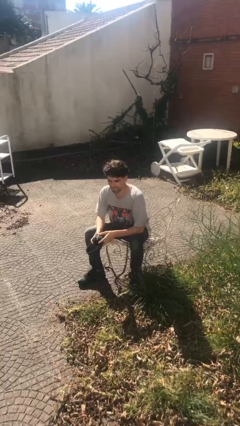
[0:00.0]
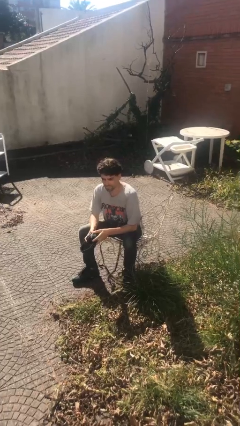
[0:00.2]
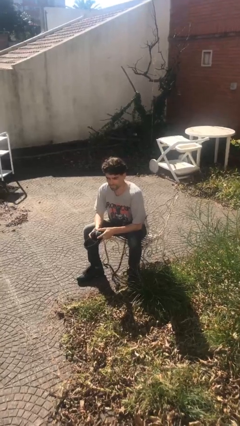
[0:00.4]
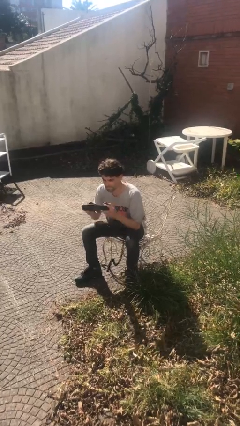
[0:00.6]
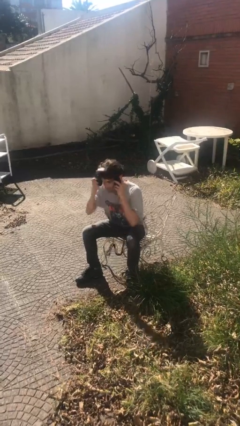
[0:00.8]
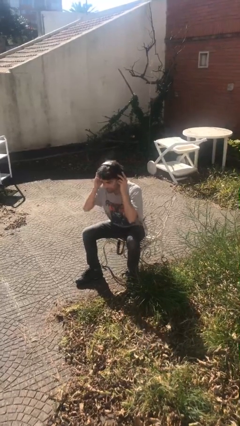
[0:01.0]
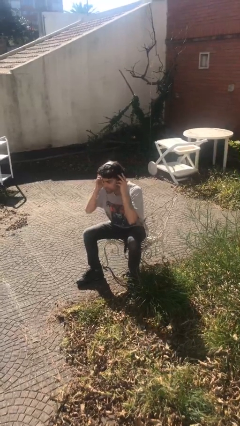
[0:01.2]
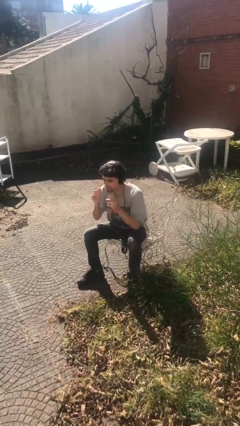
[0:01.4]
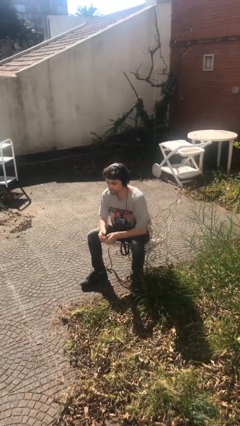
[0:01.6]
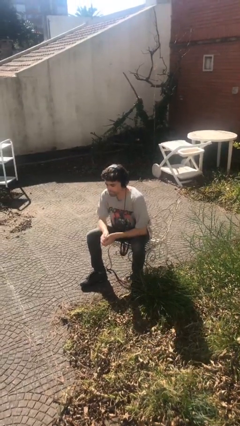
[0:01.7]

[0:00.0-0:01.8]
person puts on headphones

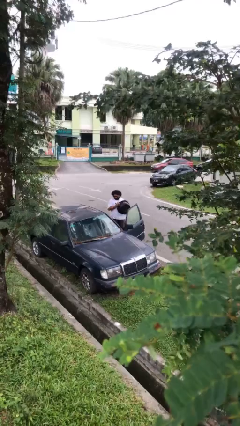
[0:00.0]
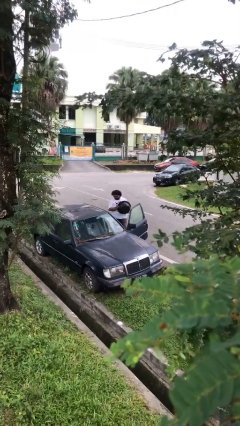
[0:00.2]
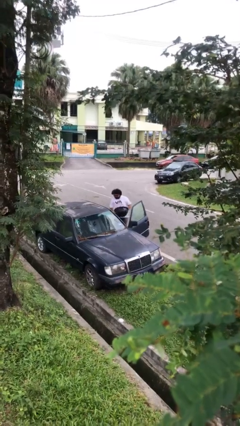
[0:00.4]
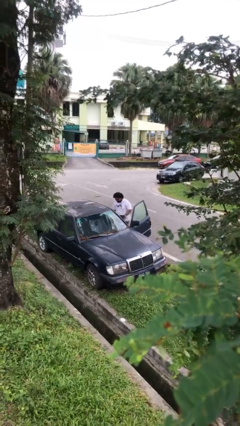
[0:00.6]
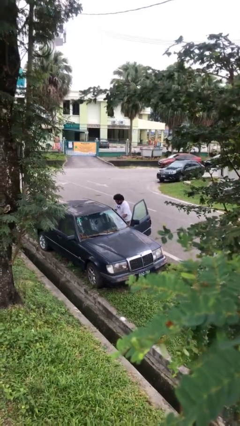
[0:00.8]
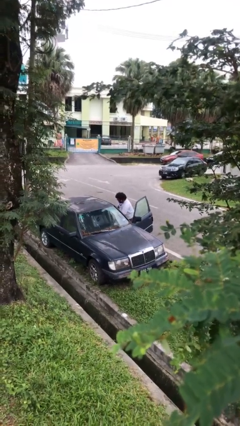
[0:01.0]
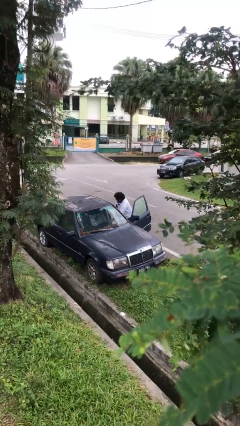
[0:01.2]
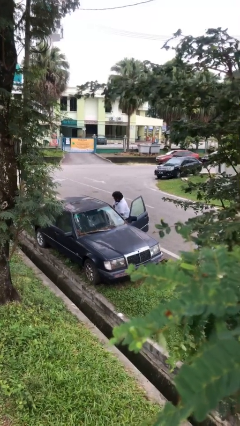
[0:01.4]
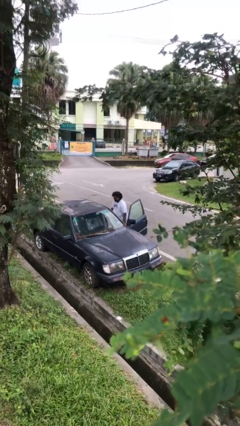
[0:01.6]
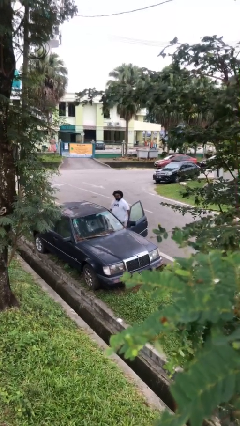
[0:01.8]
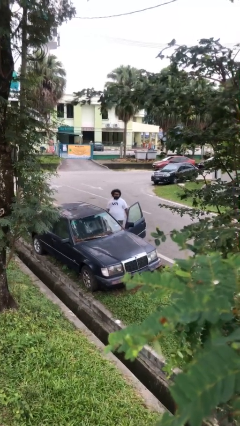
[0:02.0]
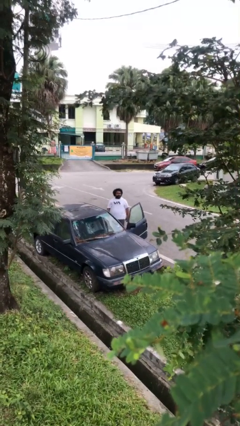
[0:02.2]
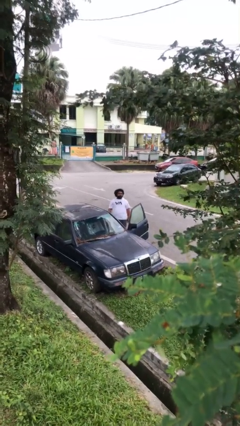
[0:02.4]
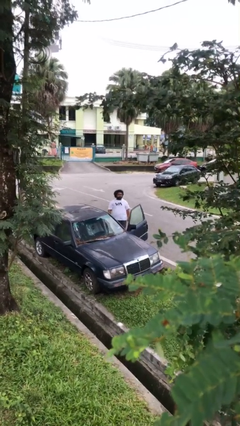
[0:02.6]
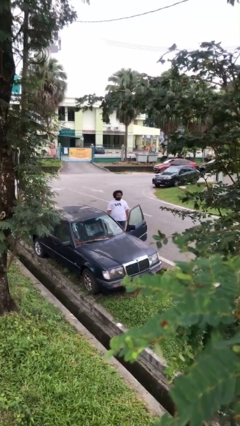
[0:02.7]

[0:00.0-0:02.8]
person loads car

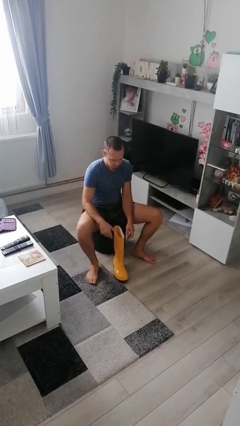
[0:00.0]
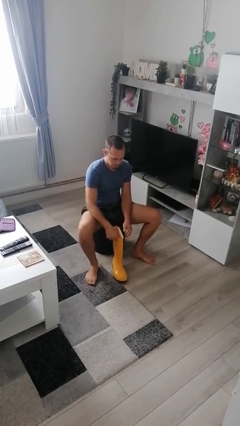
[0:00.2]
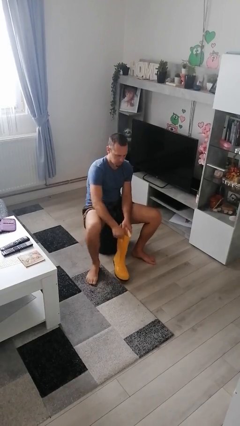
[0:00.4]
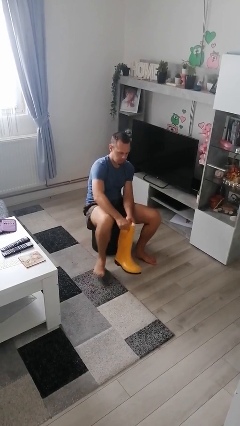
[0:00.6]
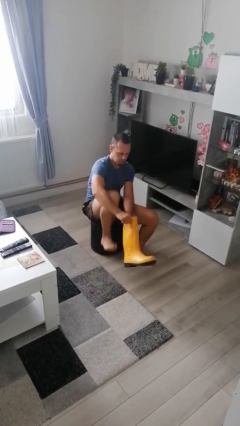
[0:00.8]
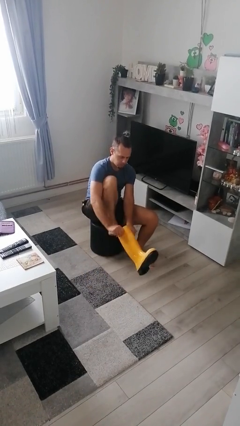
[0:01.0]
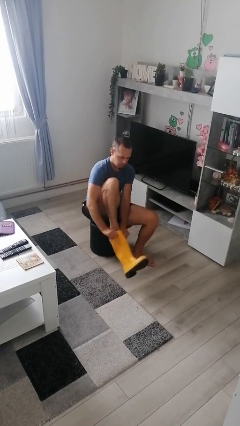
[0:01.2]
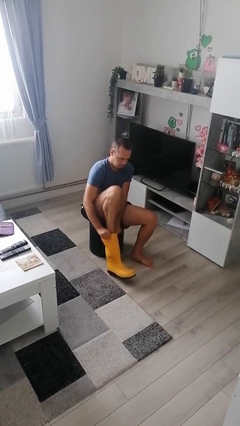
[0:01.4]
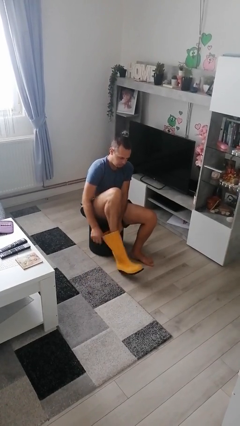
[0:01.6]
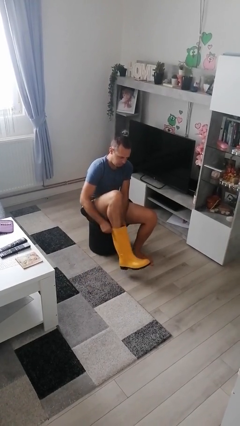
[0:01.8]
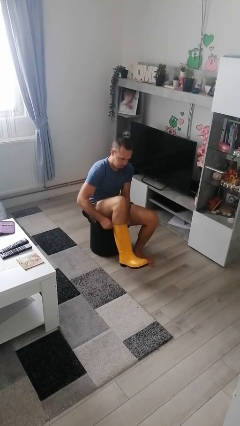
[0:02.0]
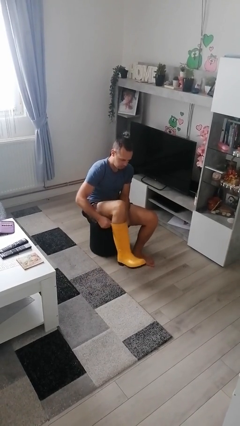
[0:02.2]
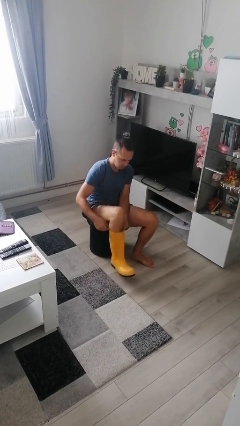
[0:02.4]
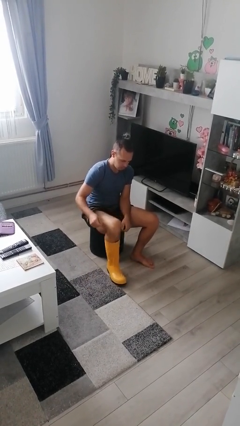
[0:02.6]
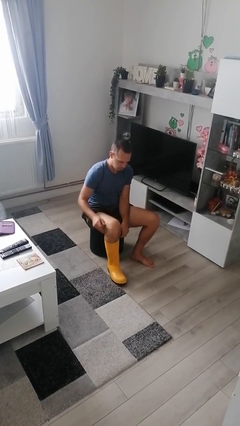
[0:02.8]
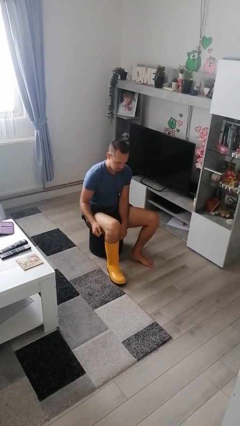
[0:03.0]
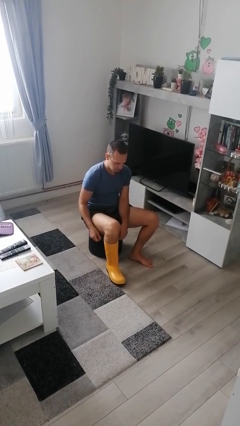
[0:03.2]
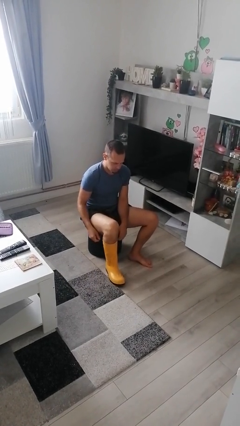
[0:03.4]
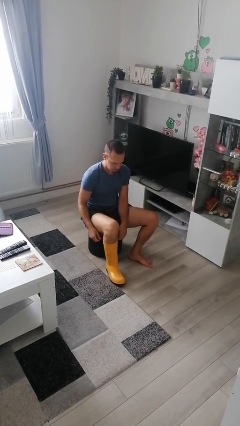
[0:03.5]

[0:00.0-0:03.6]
person puts on boots

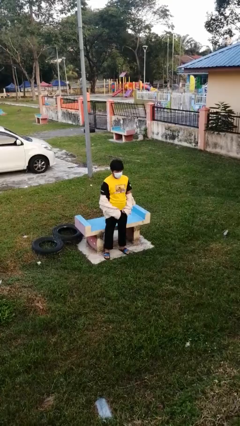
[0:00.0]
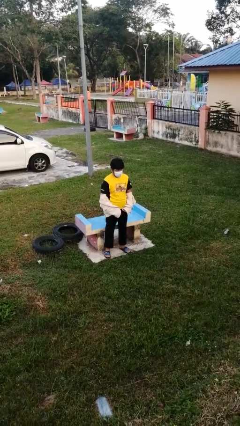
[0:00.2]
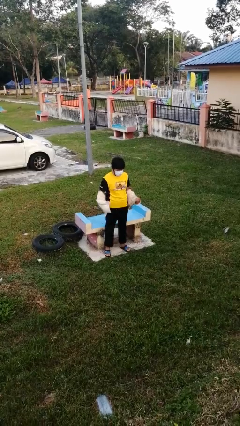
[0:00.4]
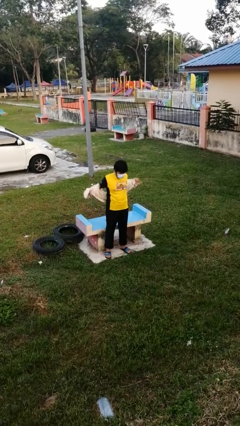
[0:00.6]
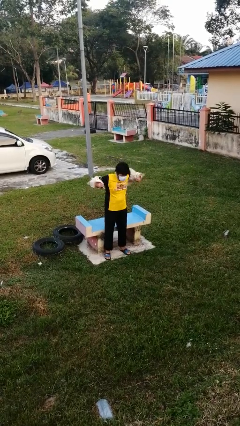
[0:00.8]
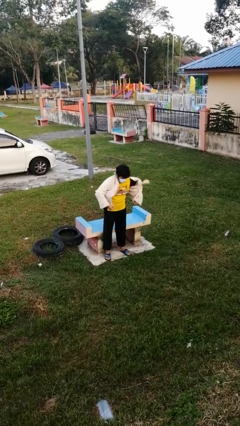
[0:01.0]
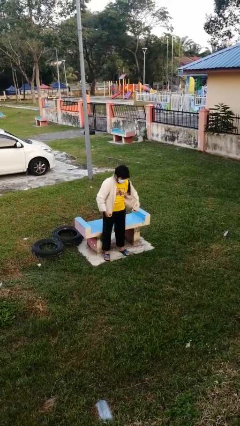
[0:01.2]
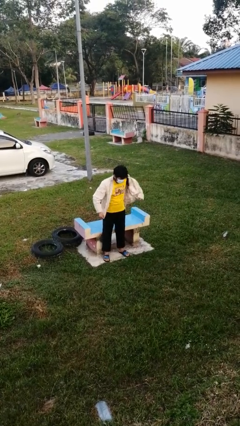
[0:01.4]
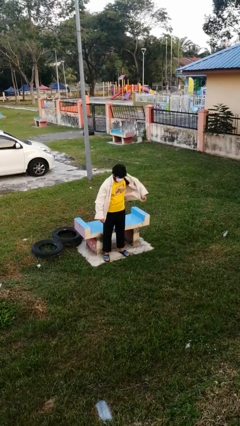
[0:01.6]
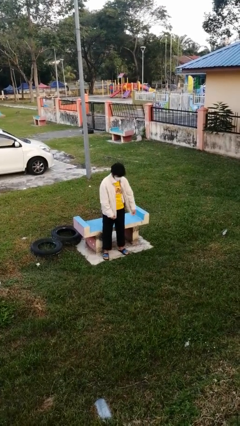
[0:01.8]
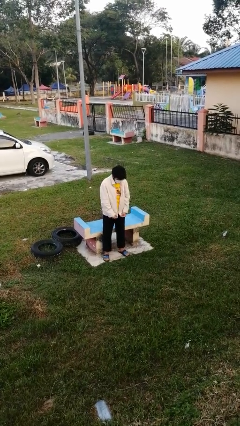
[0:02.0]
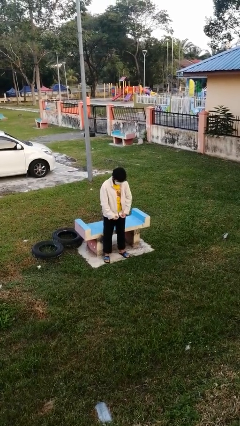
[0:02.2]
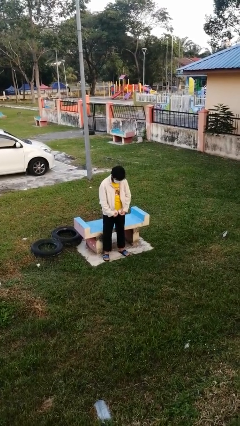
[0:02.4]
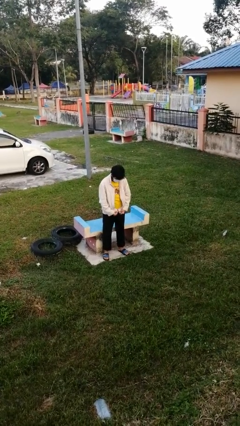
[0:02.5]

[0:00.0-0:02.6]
person puts on jacket

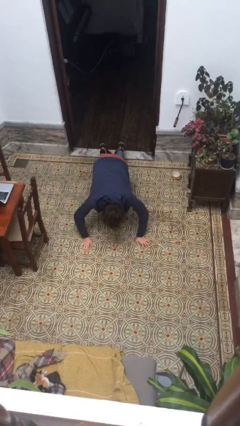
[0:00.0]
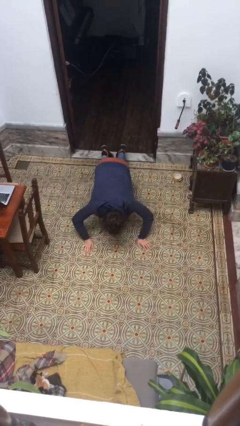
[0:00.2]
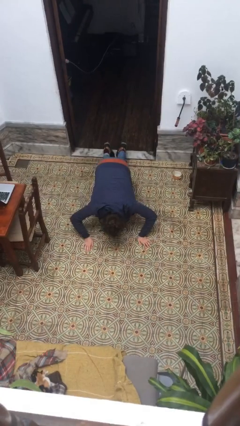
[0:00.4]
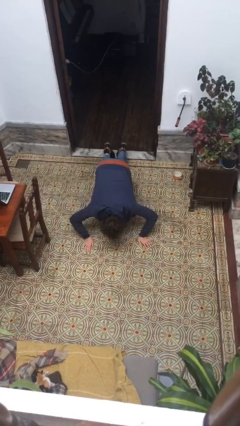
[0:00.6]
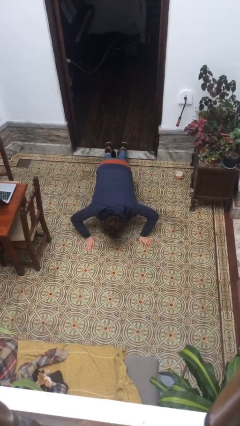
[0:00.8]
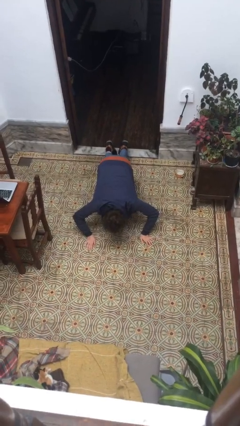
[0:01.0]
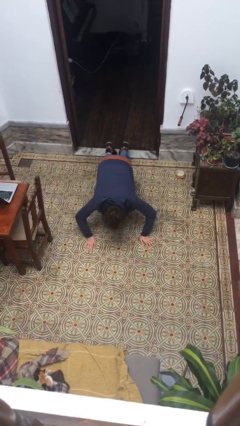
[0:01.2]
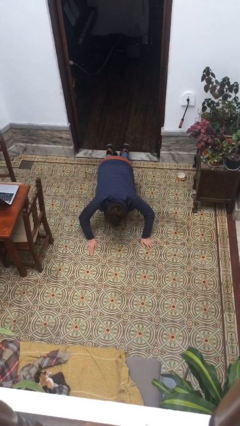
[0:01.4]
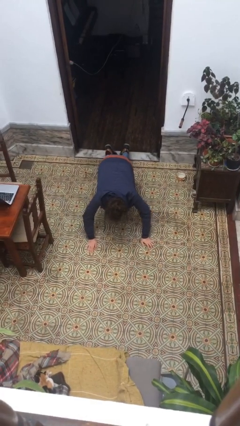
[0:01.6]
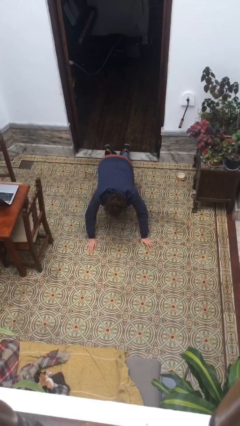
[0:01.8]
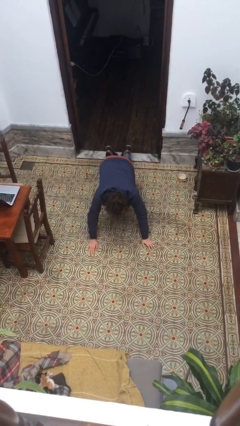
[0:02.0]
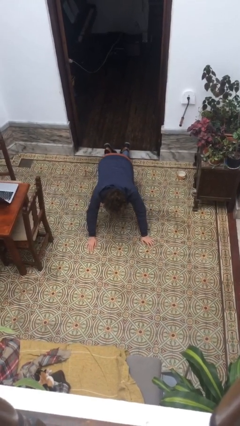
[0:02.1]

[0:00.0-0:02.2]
person exercises with pushup

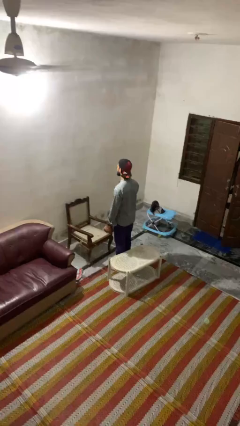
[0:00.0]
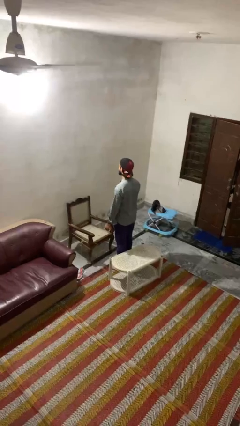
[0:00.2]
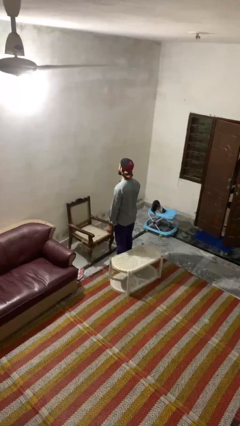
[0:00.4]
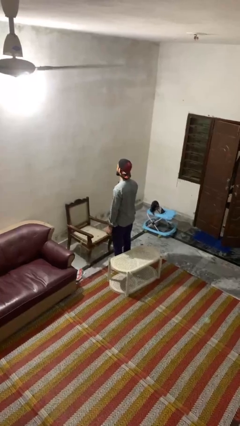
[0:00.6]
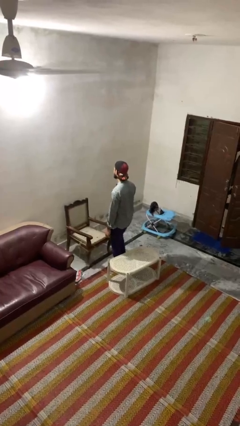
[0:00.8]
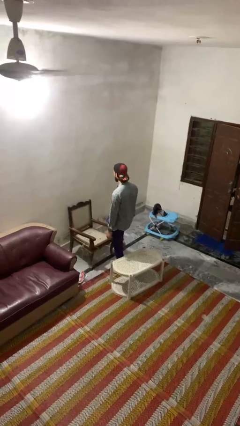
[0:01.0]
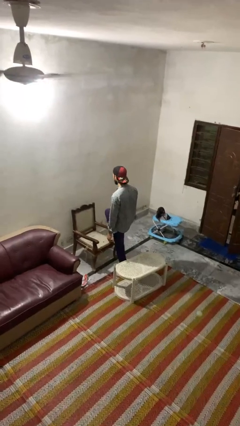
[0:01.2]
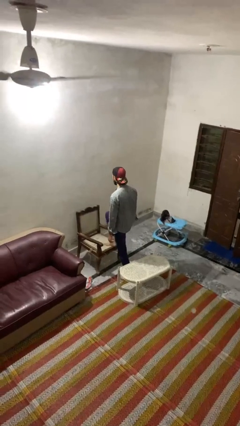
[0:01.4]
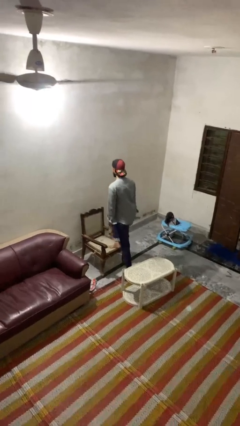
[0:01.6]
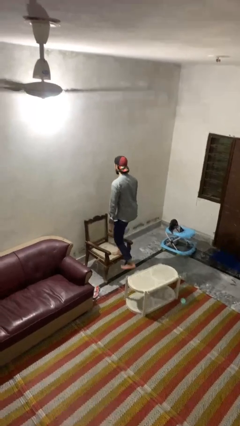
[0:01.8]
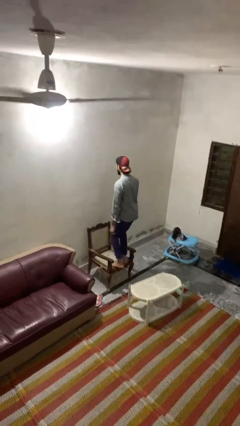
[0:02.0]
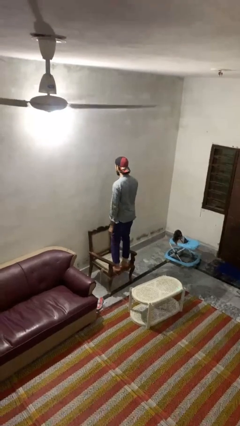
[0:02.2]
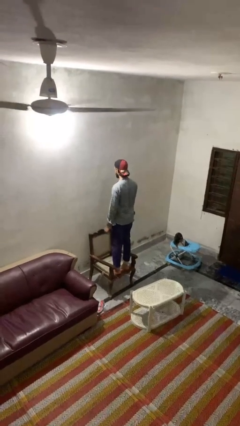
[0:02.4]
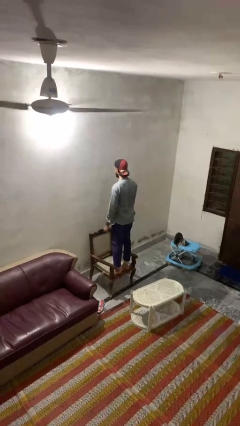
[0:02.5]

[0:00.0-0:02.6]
person climbs on chair

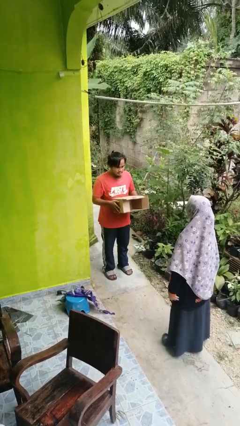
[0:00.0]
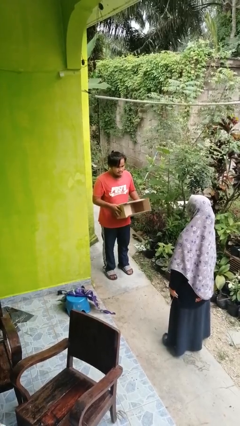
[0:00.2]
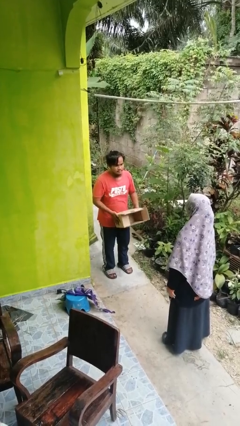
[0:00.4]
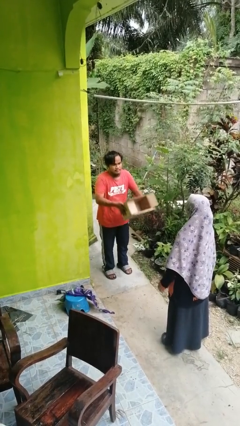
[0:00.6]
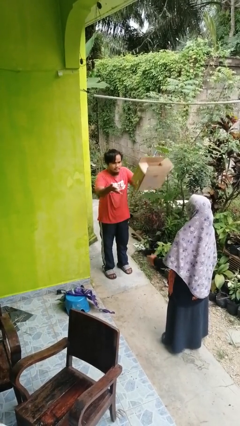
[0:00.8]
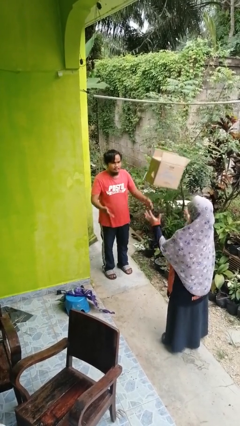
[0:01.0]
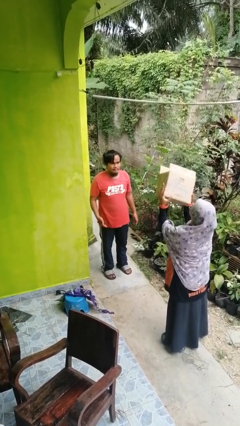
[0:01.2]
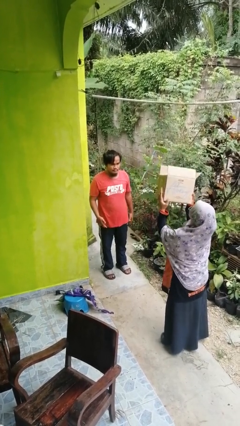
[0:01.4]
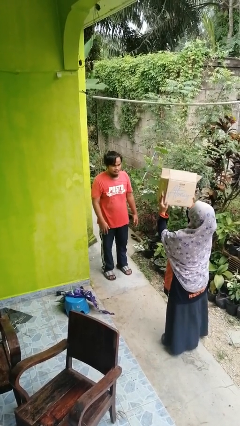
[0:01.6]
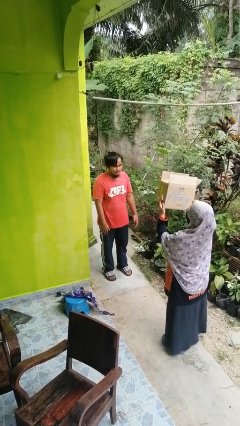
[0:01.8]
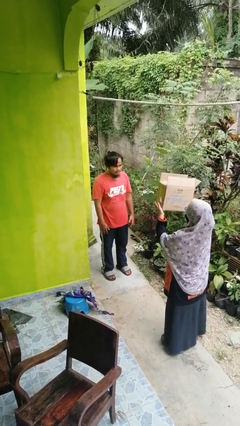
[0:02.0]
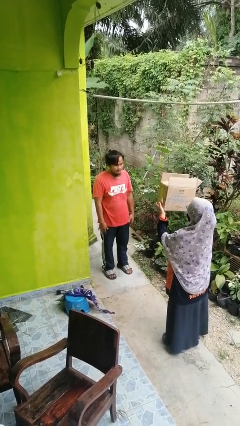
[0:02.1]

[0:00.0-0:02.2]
person throws object to person
